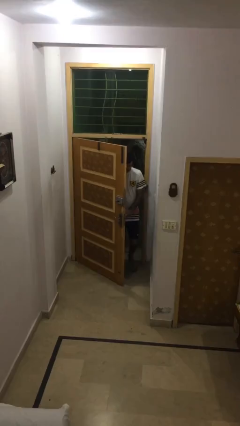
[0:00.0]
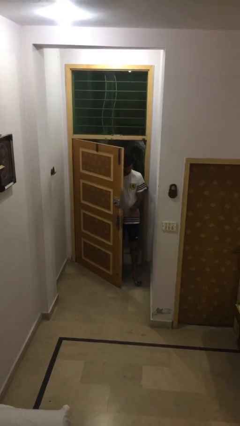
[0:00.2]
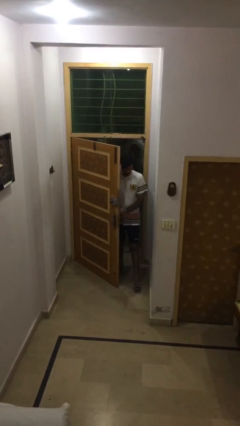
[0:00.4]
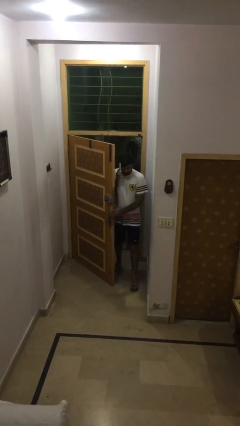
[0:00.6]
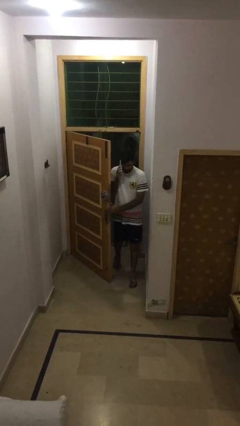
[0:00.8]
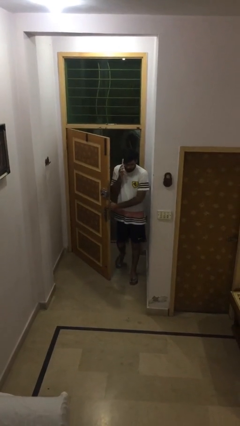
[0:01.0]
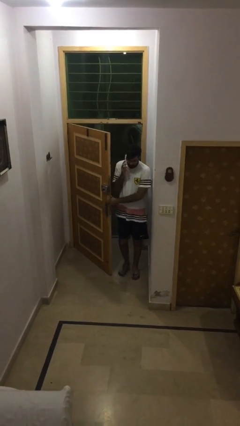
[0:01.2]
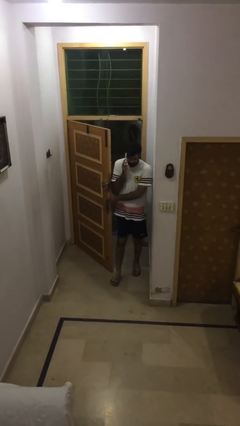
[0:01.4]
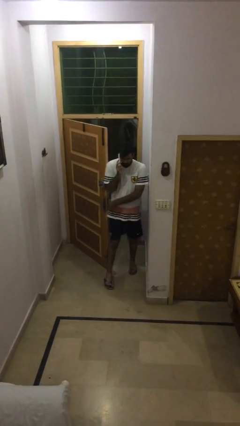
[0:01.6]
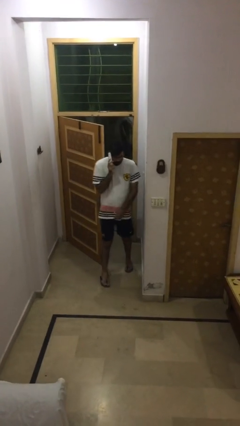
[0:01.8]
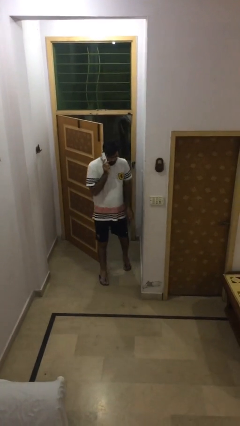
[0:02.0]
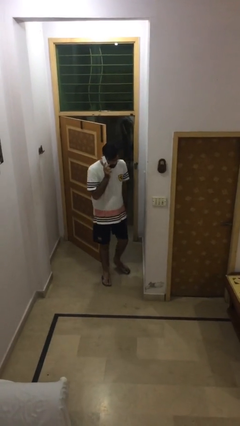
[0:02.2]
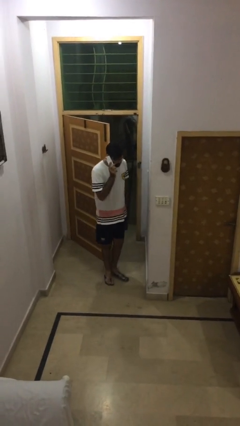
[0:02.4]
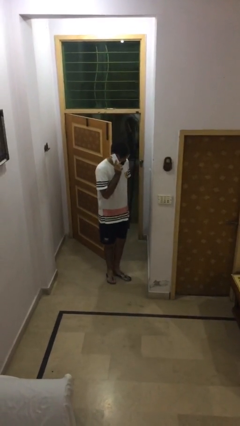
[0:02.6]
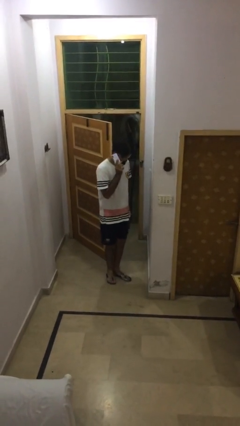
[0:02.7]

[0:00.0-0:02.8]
person enters scene through structure

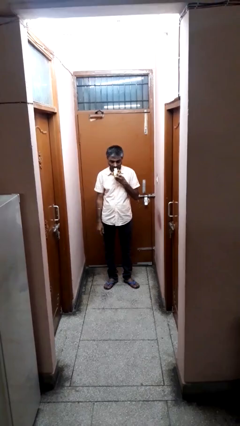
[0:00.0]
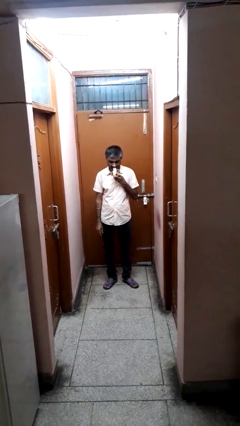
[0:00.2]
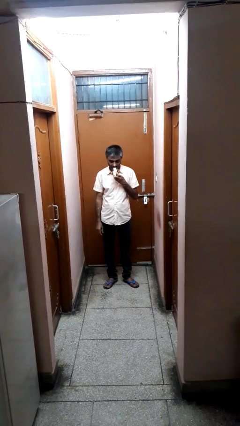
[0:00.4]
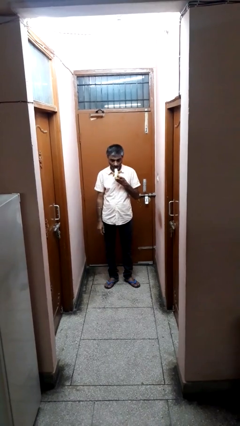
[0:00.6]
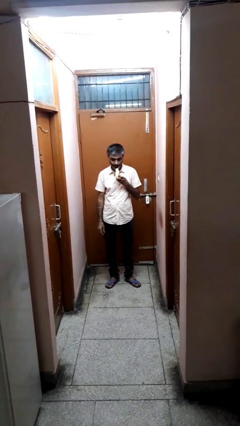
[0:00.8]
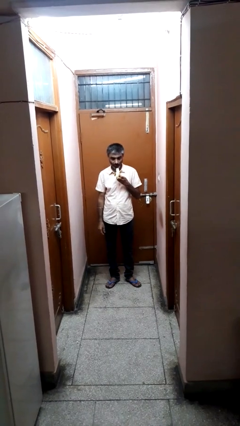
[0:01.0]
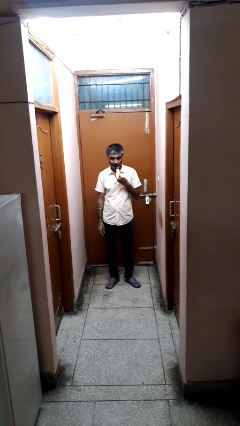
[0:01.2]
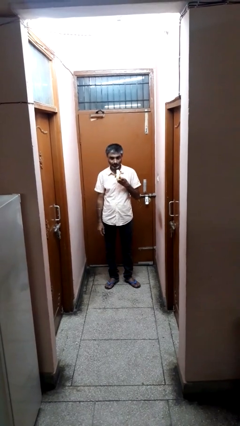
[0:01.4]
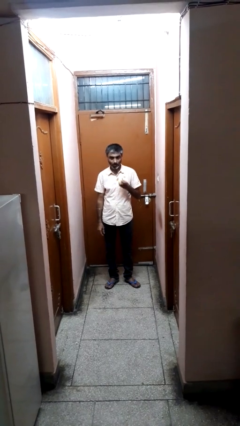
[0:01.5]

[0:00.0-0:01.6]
person eats banana

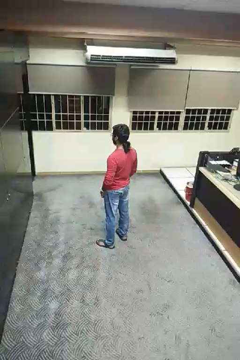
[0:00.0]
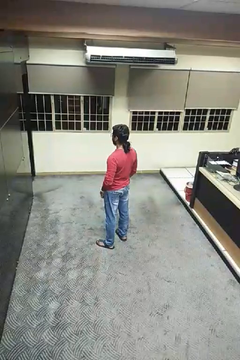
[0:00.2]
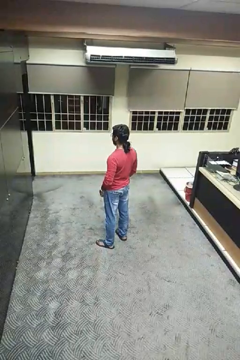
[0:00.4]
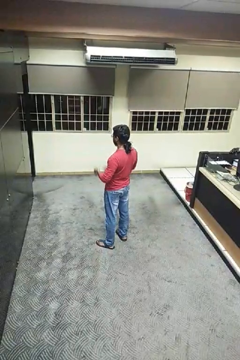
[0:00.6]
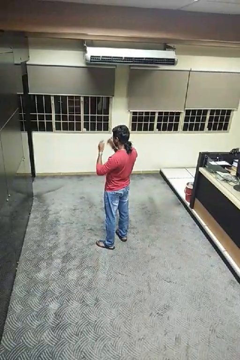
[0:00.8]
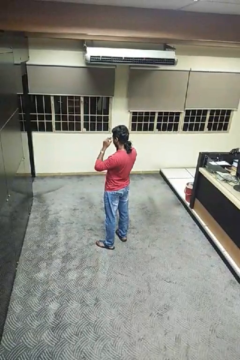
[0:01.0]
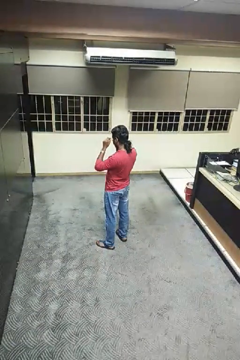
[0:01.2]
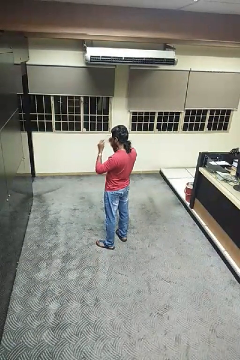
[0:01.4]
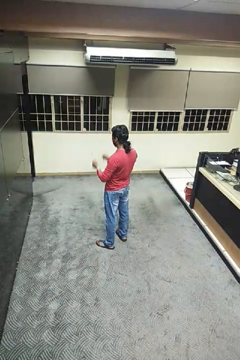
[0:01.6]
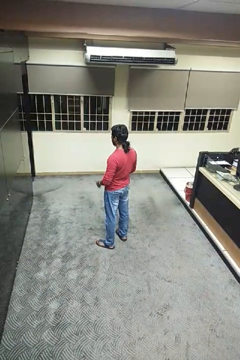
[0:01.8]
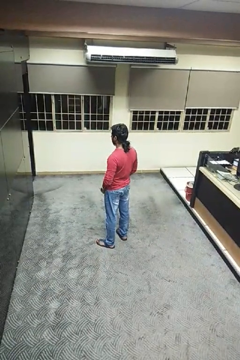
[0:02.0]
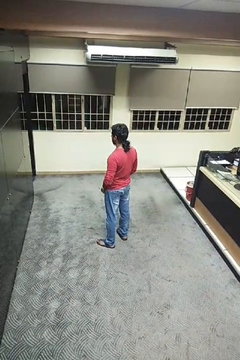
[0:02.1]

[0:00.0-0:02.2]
person takes off glasses

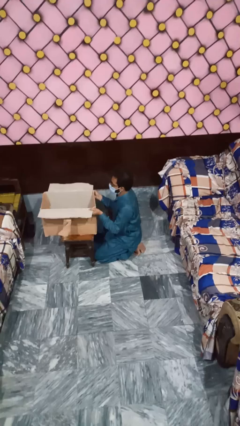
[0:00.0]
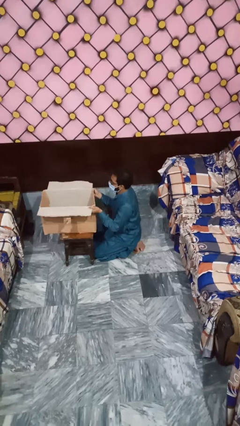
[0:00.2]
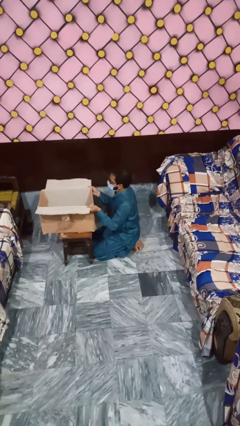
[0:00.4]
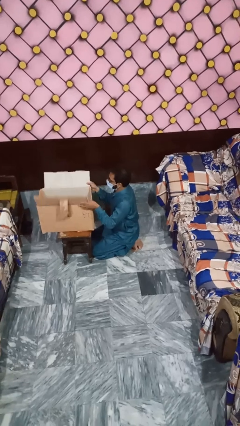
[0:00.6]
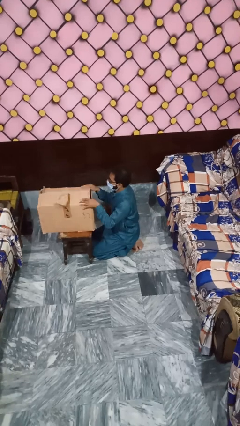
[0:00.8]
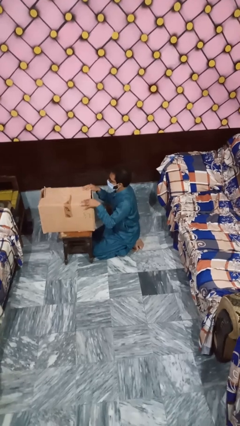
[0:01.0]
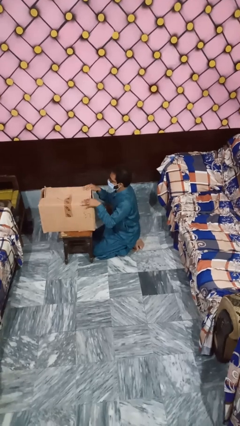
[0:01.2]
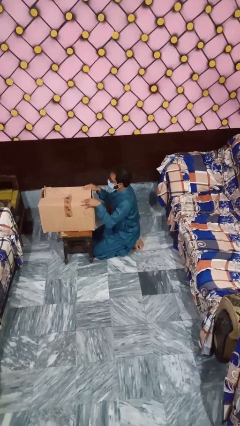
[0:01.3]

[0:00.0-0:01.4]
person closes box

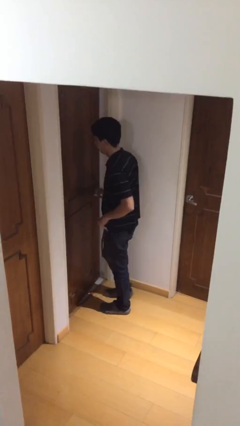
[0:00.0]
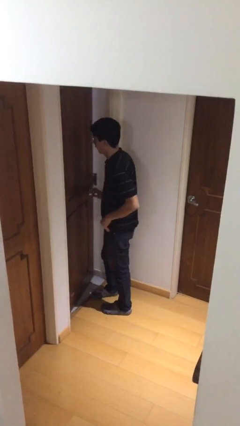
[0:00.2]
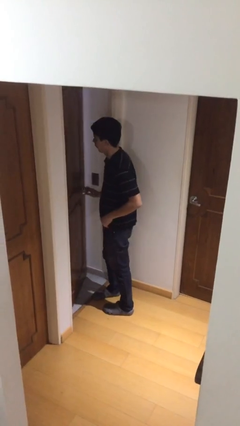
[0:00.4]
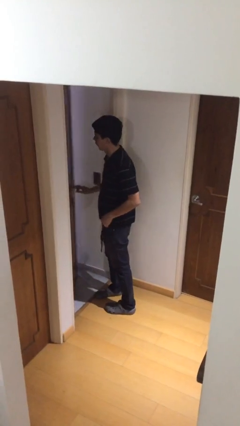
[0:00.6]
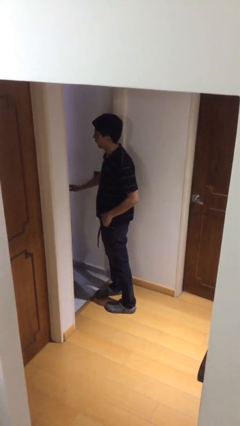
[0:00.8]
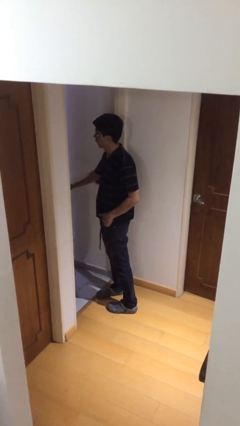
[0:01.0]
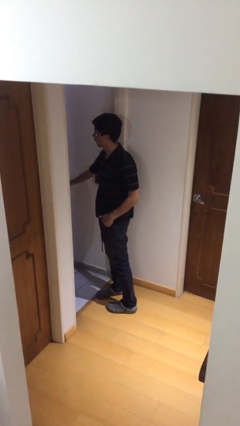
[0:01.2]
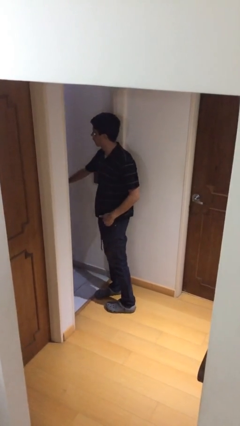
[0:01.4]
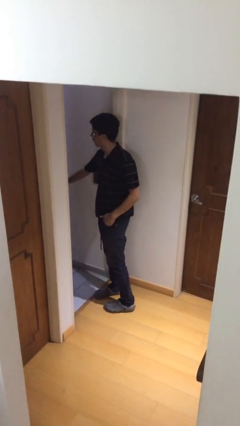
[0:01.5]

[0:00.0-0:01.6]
person opens facility door

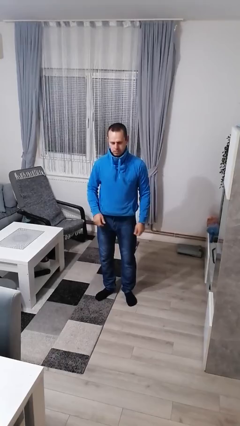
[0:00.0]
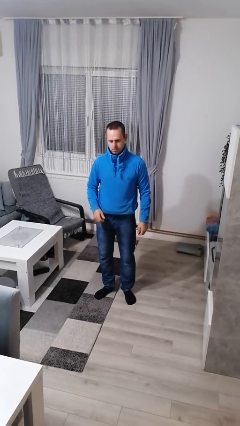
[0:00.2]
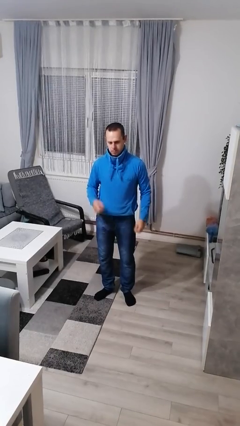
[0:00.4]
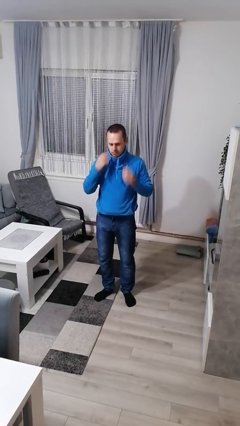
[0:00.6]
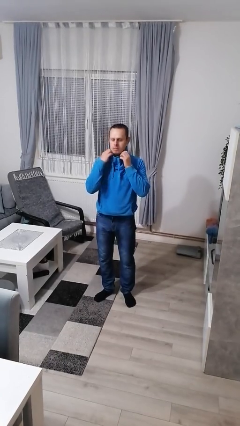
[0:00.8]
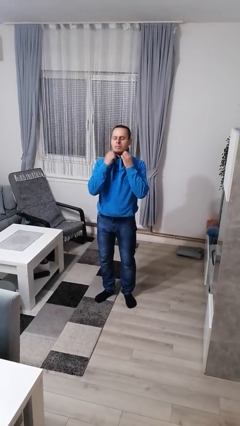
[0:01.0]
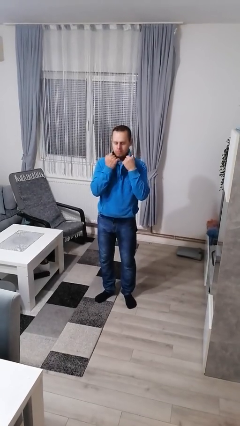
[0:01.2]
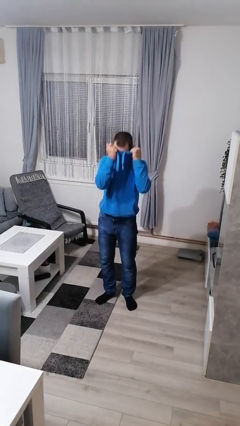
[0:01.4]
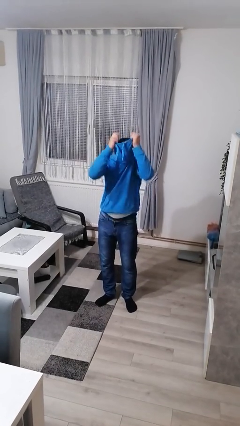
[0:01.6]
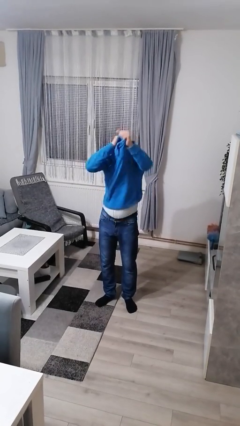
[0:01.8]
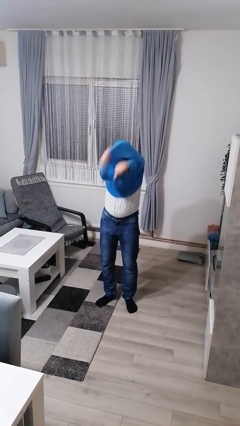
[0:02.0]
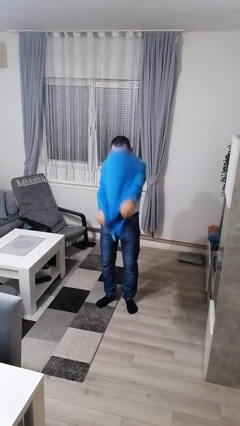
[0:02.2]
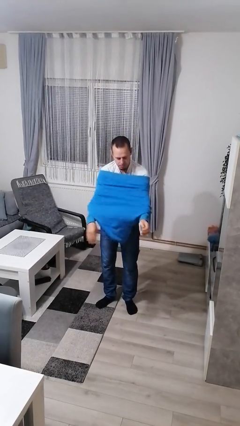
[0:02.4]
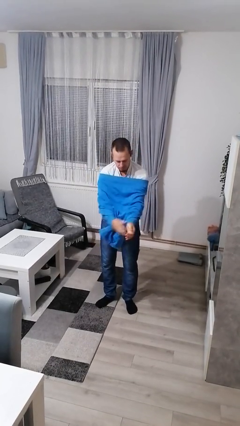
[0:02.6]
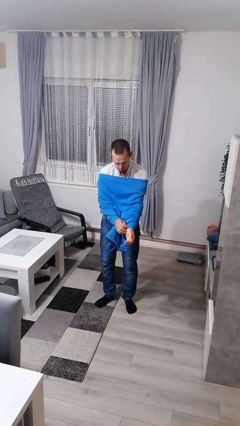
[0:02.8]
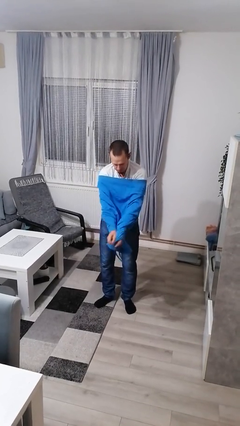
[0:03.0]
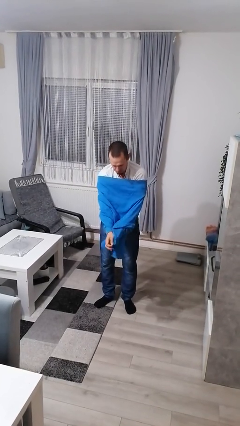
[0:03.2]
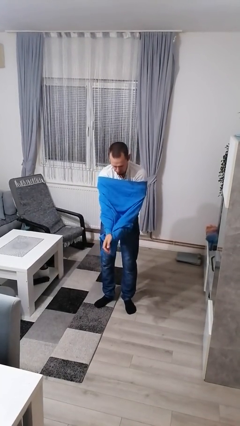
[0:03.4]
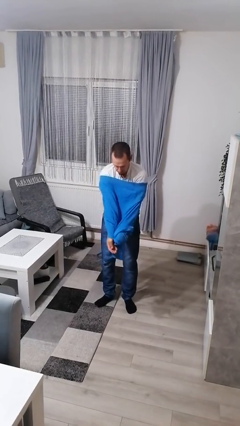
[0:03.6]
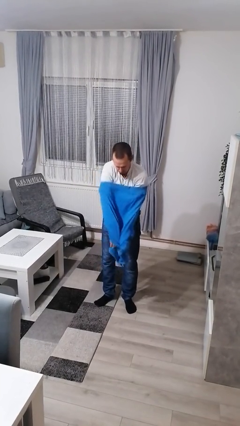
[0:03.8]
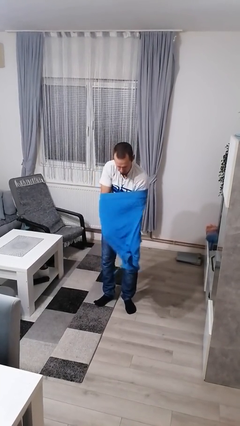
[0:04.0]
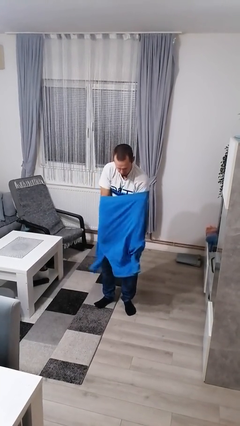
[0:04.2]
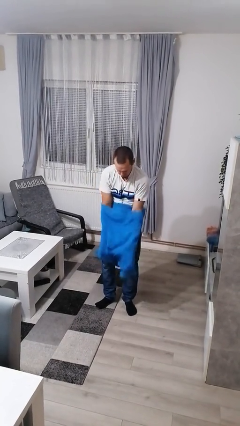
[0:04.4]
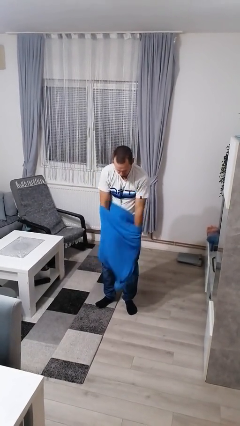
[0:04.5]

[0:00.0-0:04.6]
person takes off hoodie

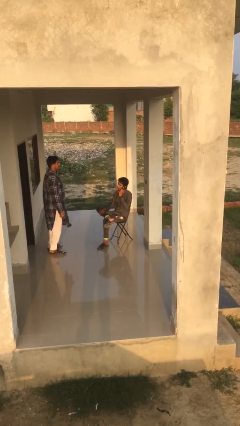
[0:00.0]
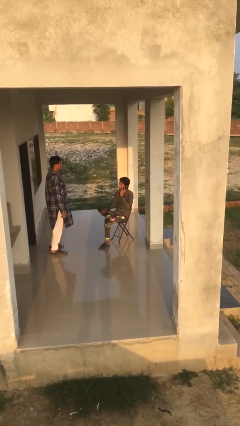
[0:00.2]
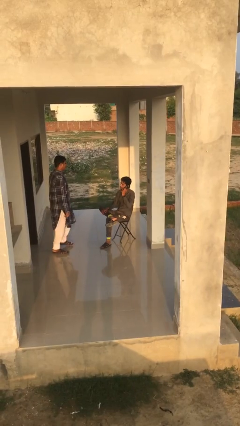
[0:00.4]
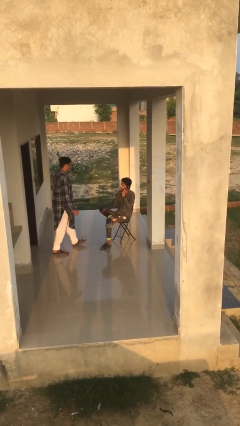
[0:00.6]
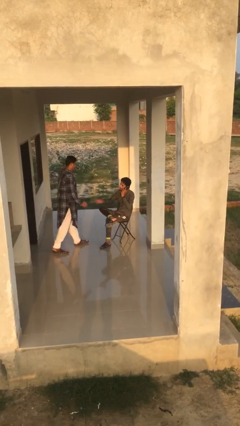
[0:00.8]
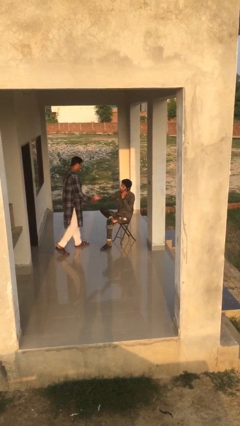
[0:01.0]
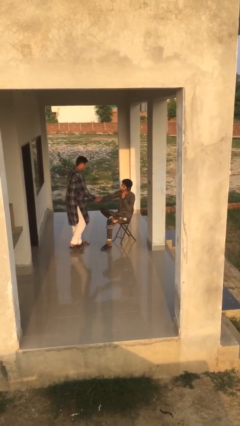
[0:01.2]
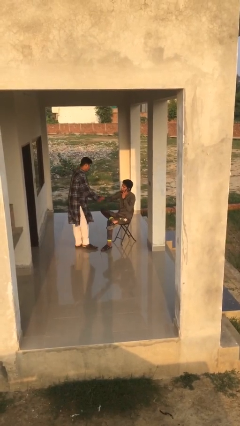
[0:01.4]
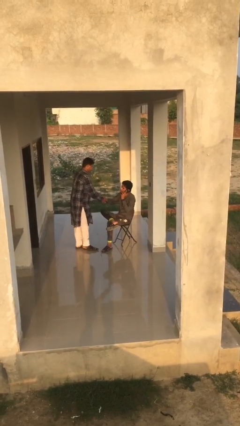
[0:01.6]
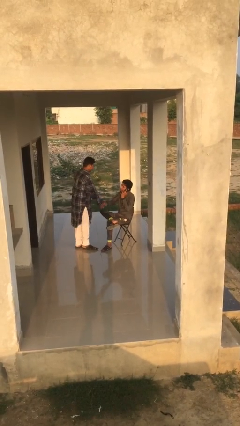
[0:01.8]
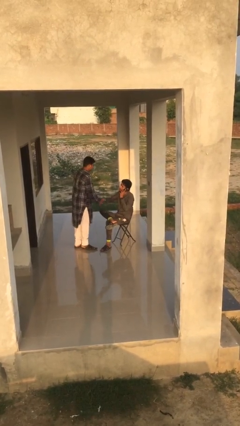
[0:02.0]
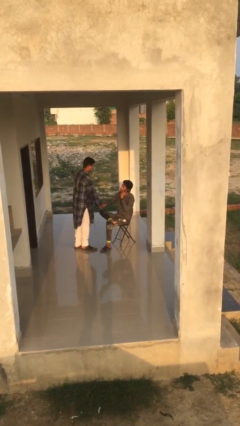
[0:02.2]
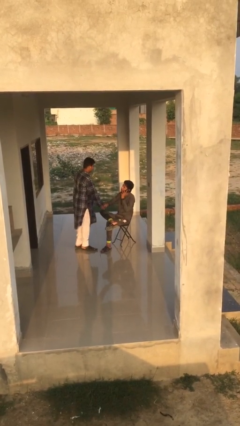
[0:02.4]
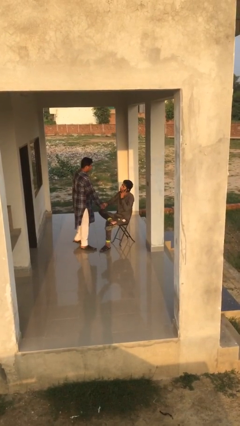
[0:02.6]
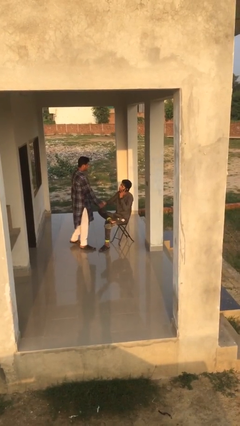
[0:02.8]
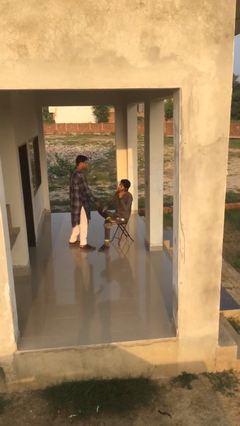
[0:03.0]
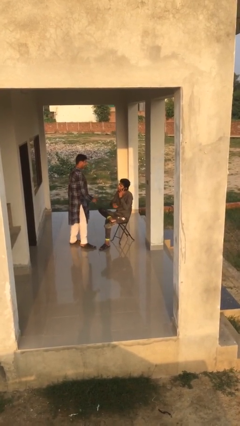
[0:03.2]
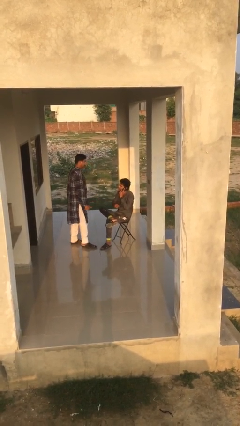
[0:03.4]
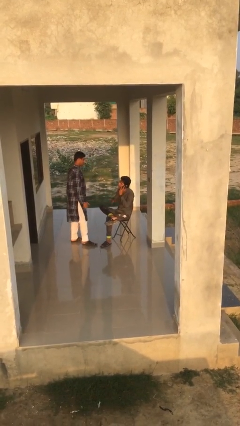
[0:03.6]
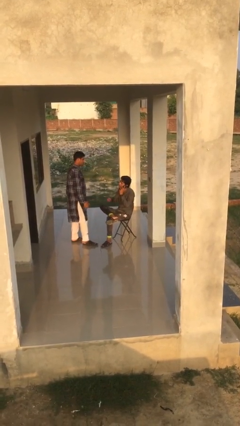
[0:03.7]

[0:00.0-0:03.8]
person shakes hand
